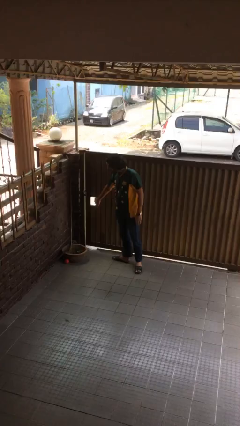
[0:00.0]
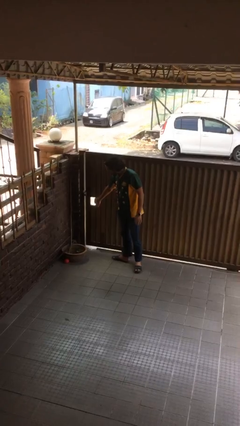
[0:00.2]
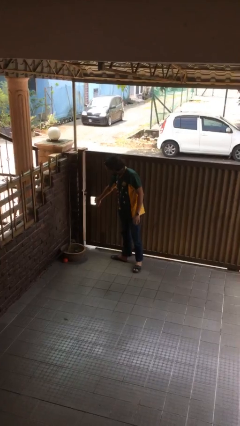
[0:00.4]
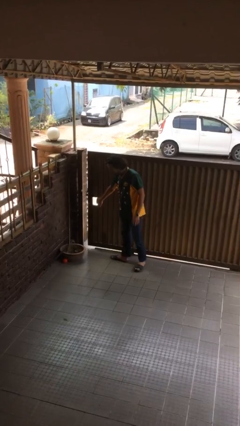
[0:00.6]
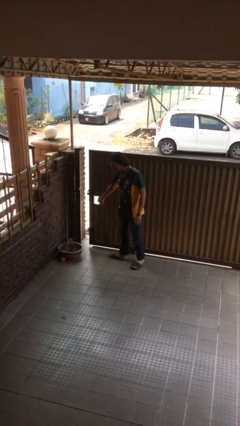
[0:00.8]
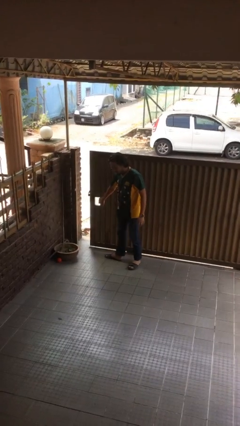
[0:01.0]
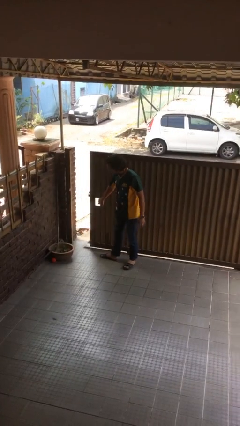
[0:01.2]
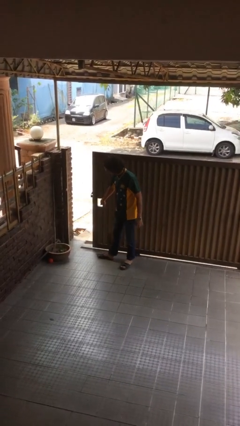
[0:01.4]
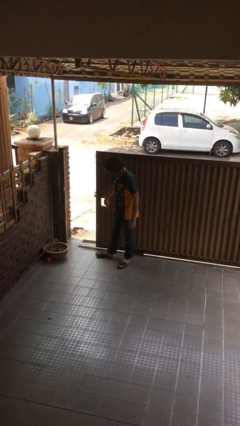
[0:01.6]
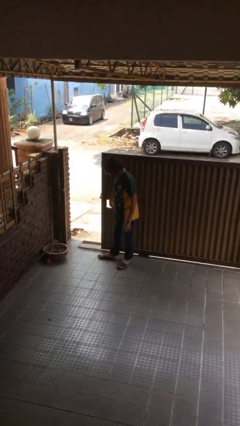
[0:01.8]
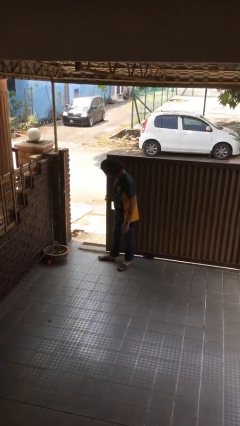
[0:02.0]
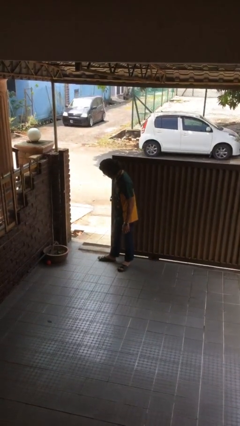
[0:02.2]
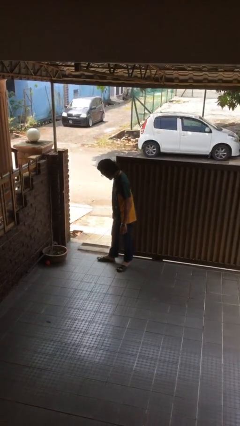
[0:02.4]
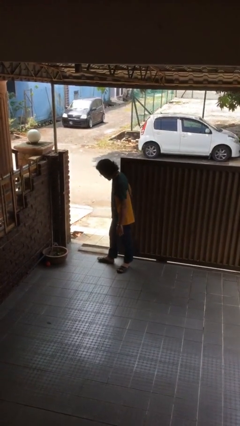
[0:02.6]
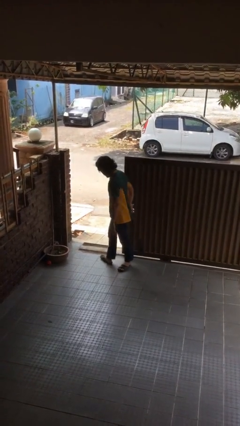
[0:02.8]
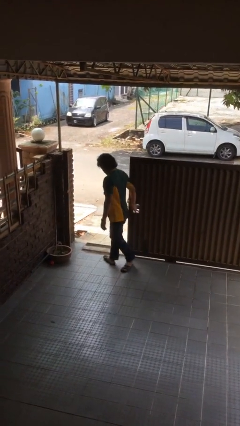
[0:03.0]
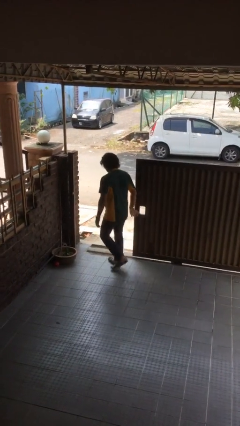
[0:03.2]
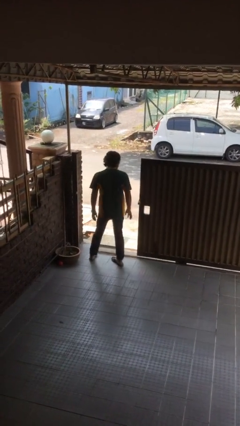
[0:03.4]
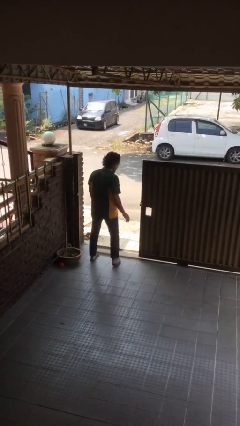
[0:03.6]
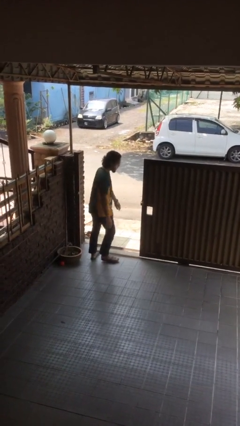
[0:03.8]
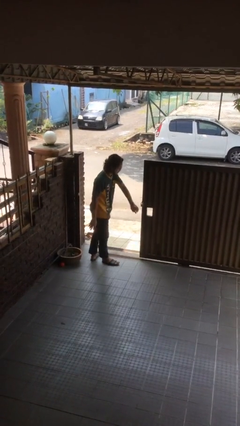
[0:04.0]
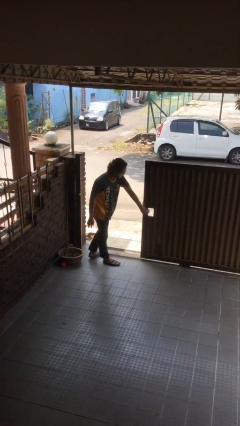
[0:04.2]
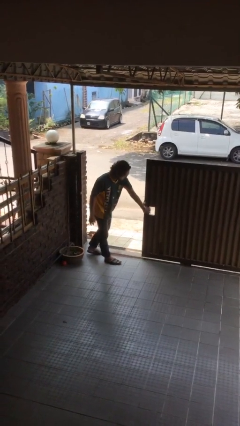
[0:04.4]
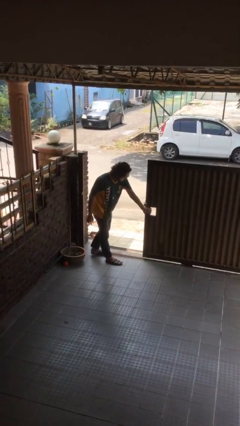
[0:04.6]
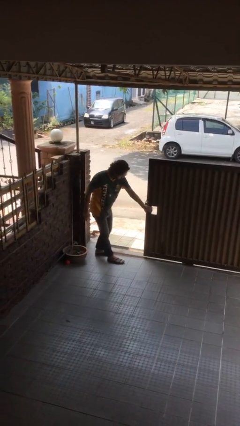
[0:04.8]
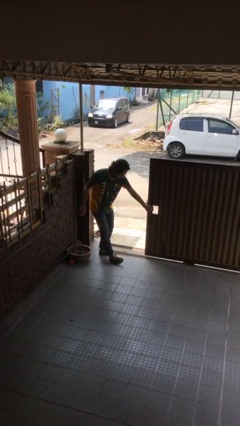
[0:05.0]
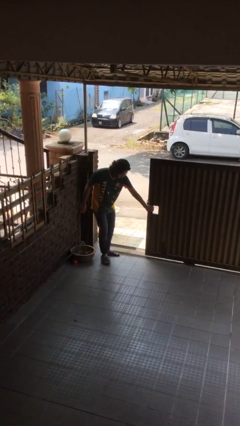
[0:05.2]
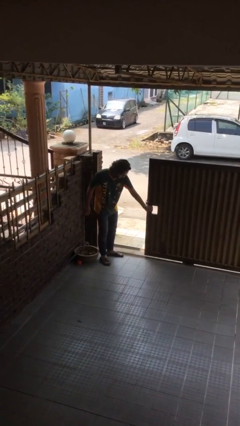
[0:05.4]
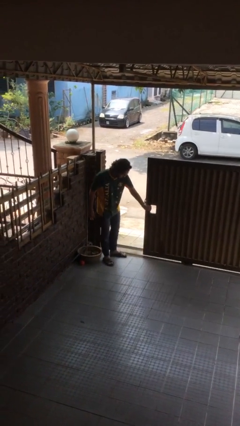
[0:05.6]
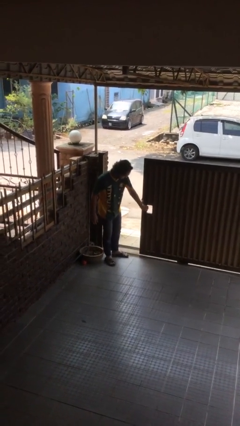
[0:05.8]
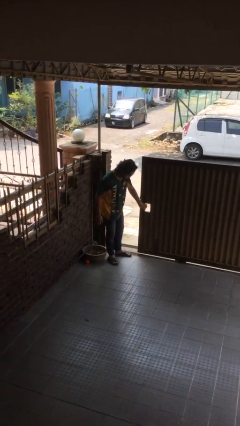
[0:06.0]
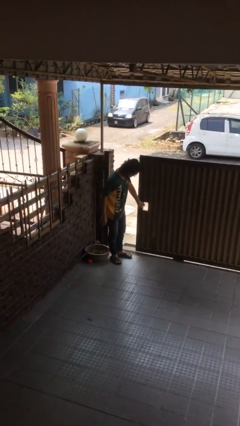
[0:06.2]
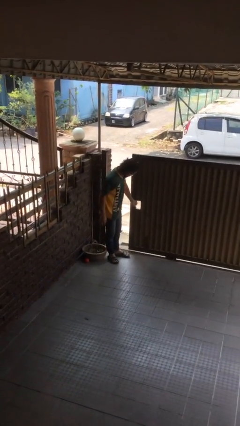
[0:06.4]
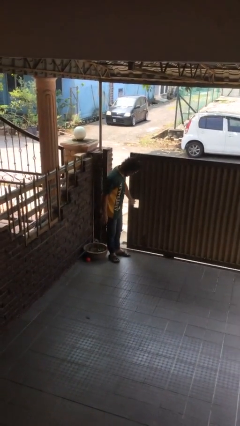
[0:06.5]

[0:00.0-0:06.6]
person opens facility door

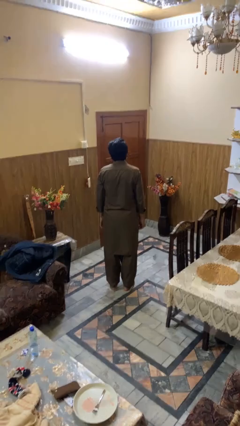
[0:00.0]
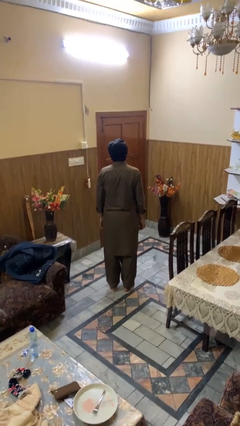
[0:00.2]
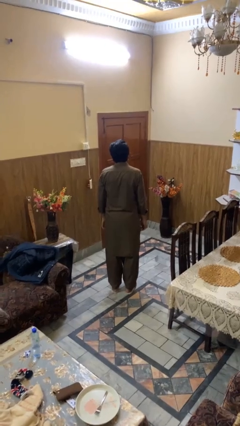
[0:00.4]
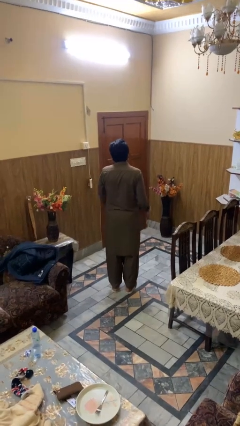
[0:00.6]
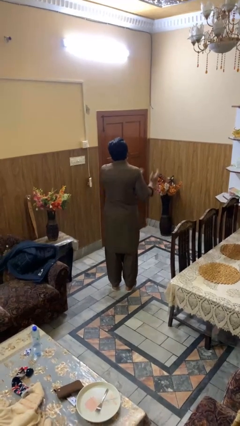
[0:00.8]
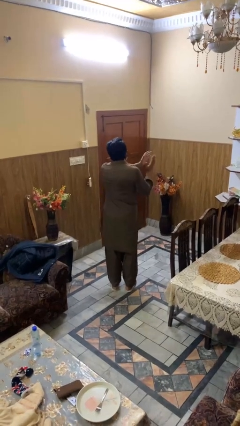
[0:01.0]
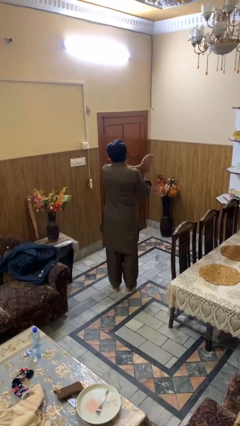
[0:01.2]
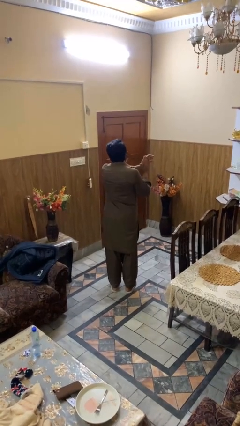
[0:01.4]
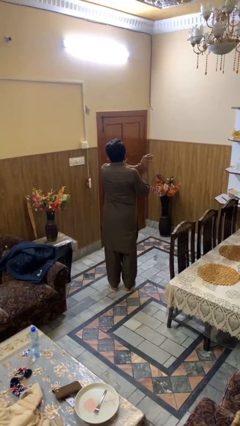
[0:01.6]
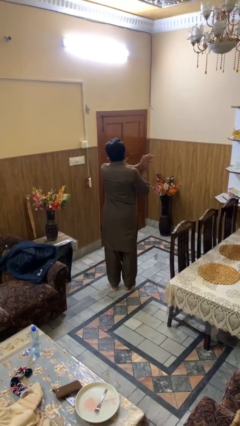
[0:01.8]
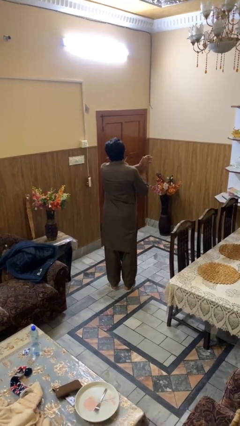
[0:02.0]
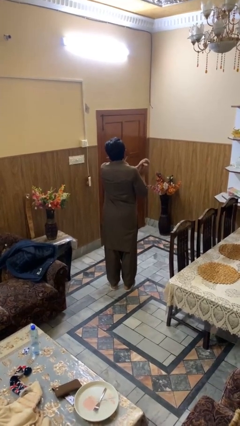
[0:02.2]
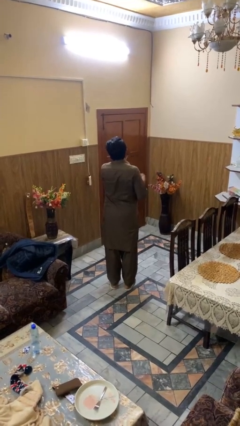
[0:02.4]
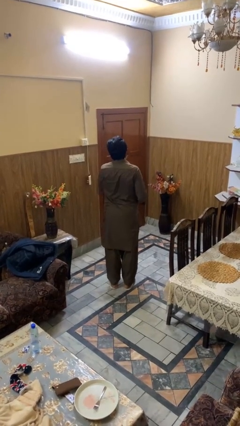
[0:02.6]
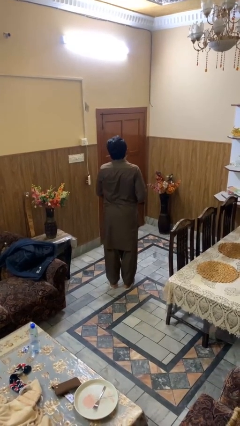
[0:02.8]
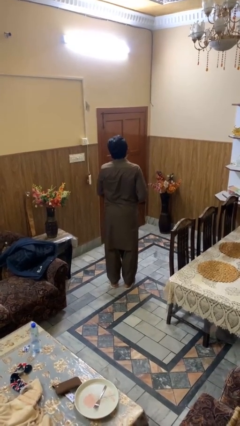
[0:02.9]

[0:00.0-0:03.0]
person claps hands

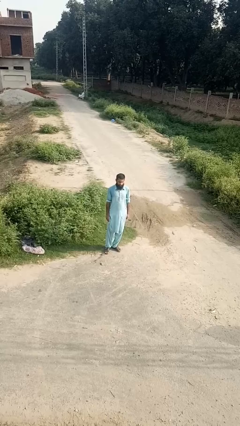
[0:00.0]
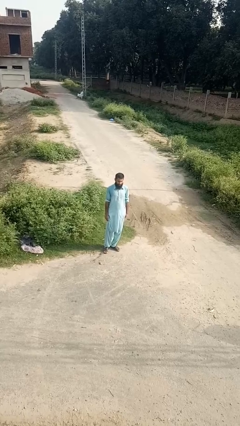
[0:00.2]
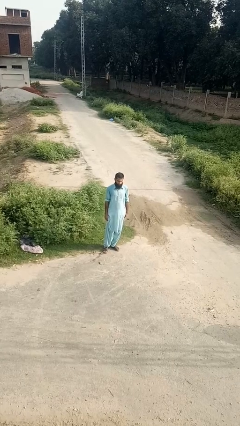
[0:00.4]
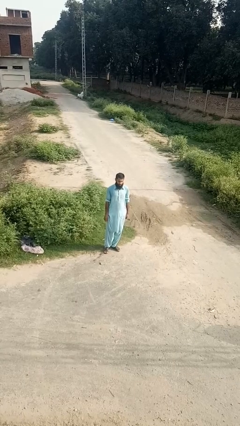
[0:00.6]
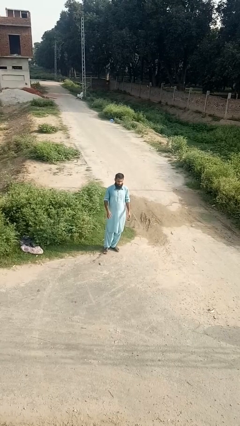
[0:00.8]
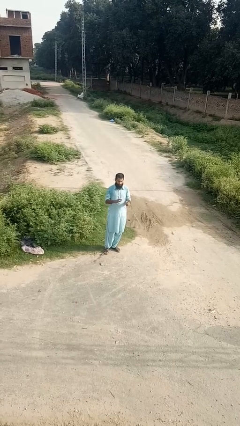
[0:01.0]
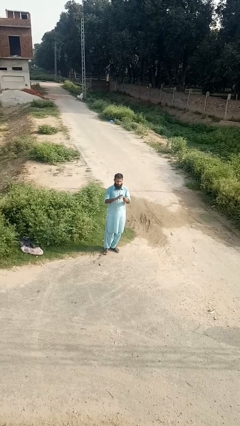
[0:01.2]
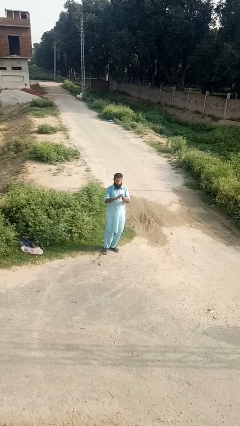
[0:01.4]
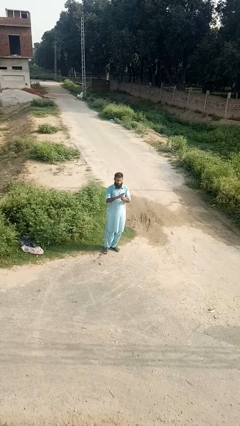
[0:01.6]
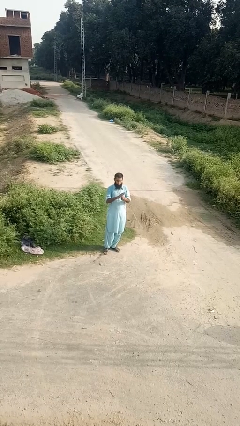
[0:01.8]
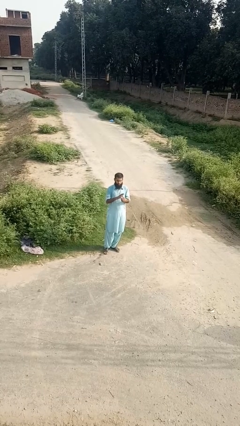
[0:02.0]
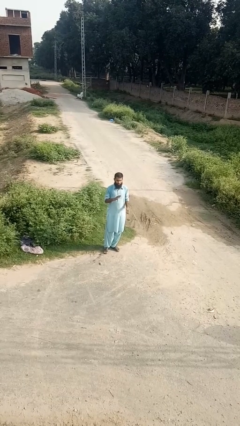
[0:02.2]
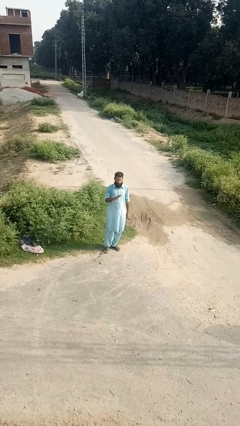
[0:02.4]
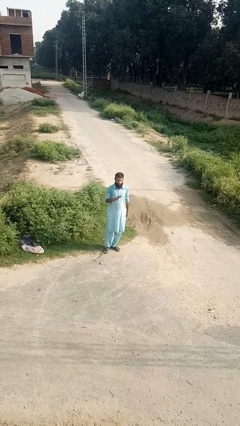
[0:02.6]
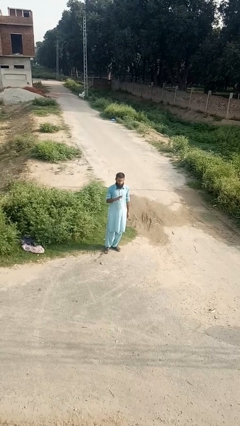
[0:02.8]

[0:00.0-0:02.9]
person puts on ring

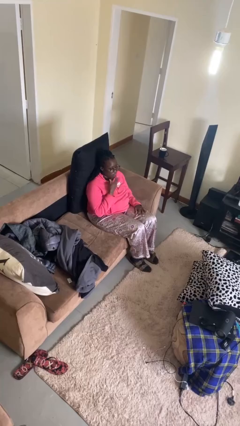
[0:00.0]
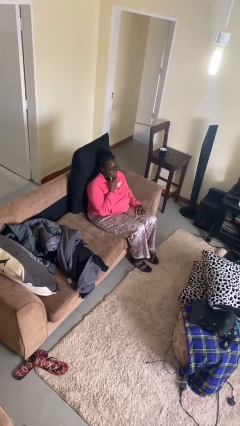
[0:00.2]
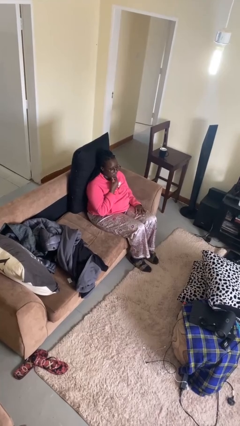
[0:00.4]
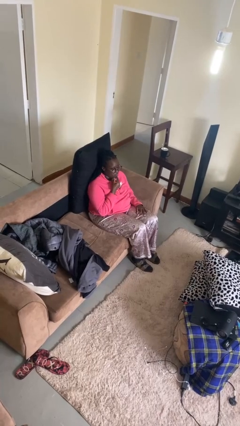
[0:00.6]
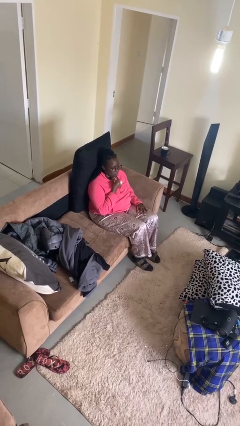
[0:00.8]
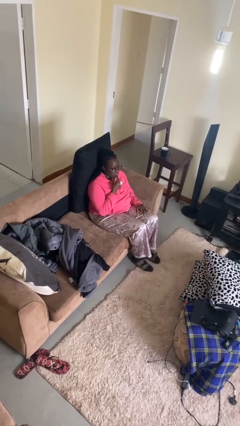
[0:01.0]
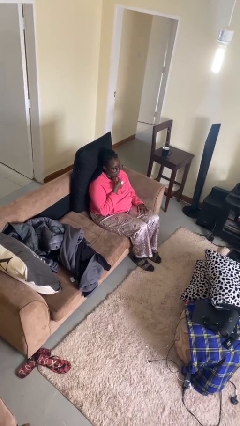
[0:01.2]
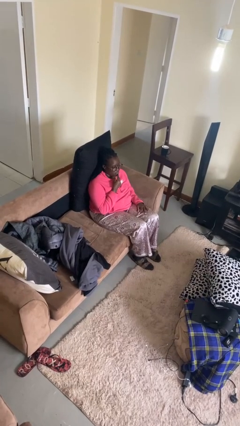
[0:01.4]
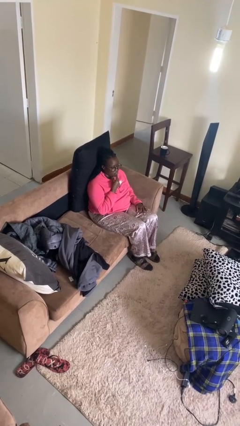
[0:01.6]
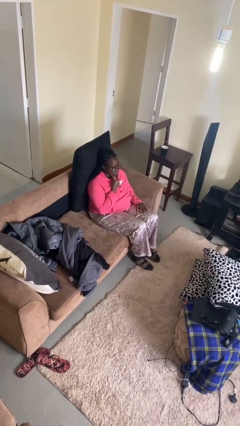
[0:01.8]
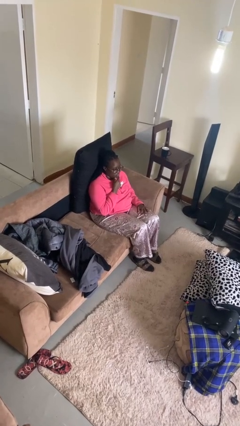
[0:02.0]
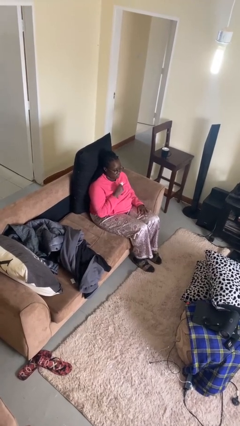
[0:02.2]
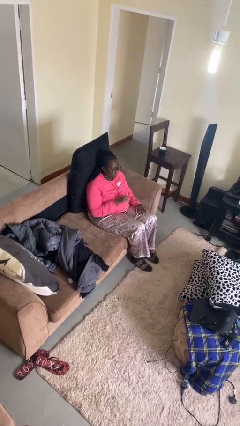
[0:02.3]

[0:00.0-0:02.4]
person strokes chin

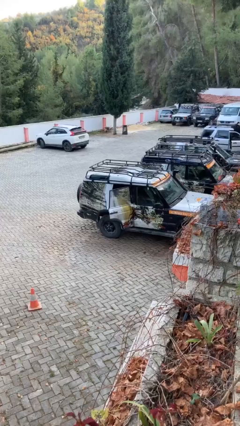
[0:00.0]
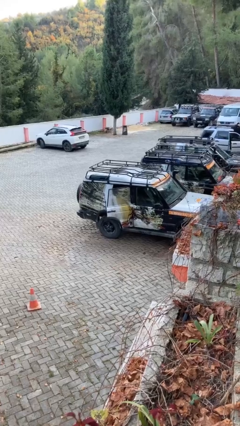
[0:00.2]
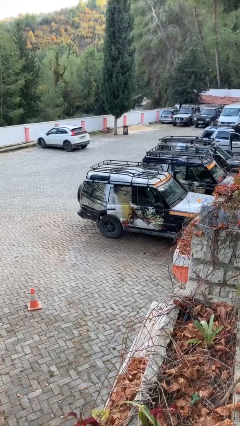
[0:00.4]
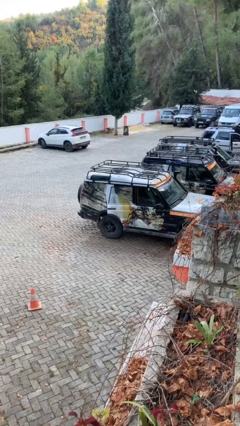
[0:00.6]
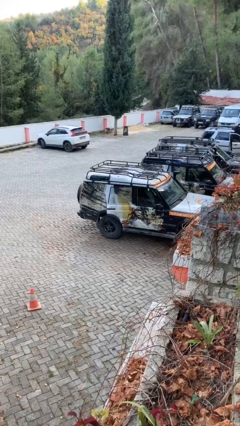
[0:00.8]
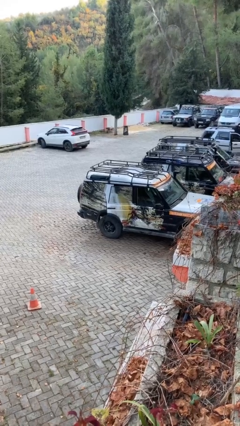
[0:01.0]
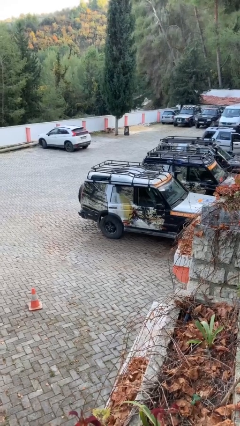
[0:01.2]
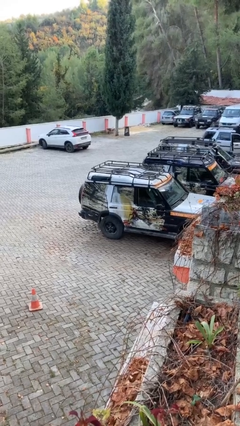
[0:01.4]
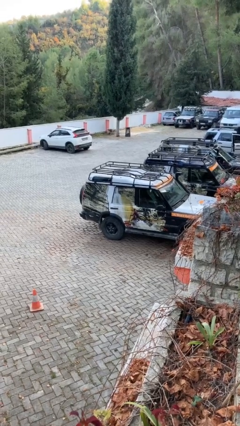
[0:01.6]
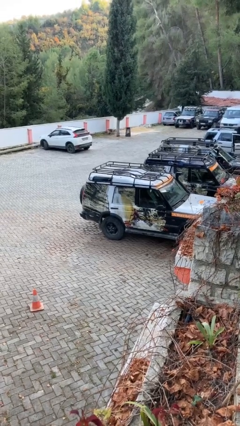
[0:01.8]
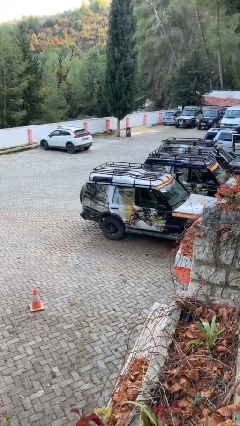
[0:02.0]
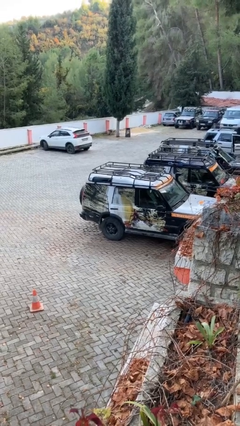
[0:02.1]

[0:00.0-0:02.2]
person closes car door

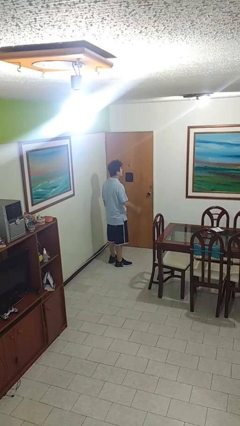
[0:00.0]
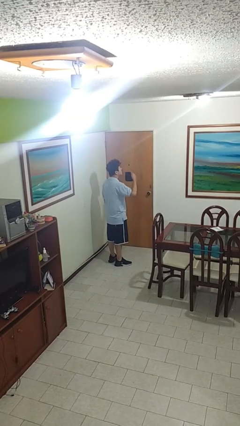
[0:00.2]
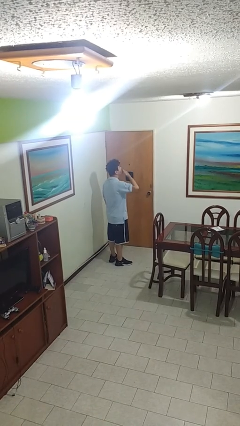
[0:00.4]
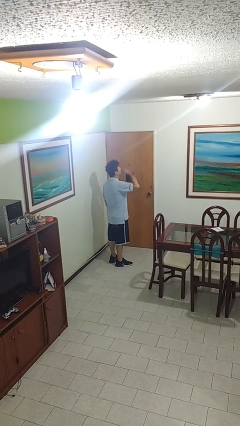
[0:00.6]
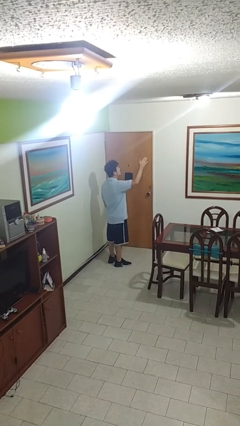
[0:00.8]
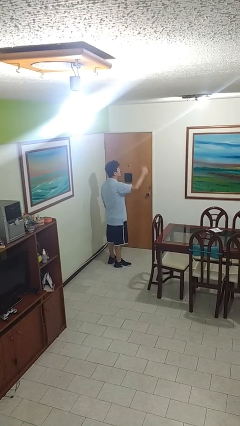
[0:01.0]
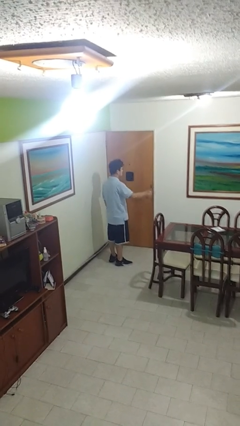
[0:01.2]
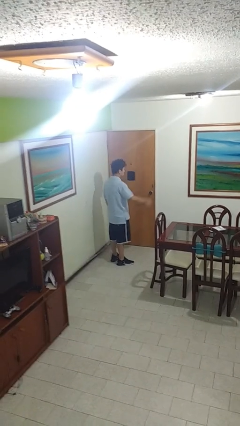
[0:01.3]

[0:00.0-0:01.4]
person gestures blow kiss
